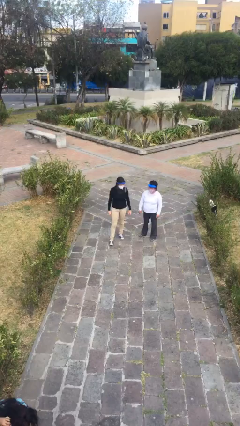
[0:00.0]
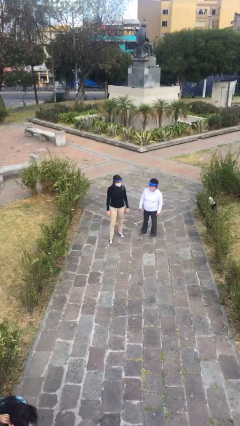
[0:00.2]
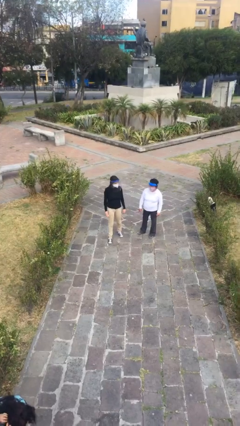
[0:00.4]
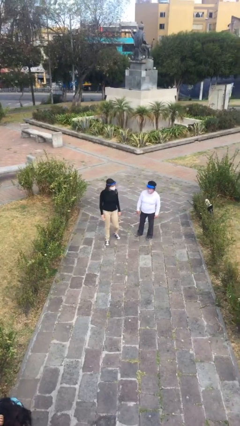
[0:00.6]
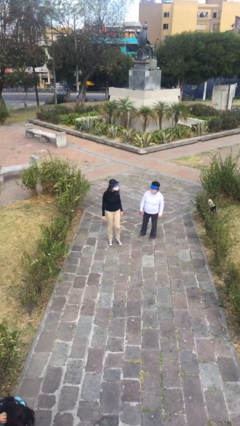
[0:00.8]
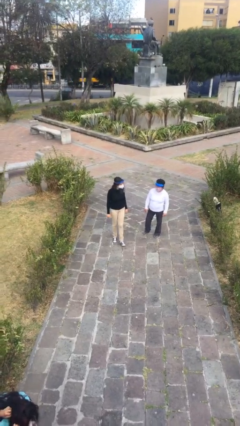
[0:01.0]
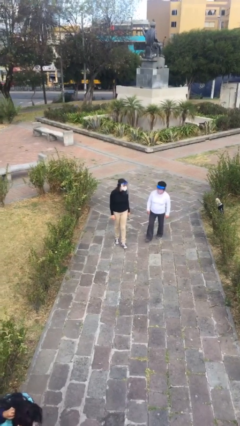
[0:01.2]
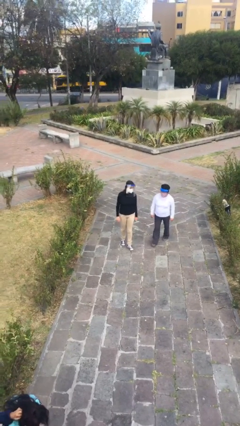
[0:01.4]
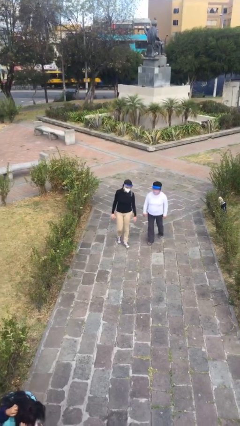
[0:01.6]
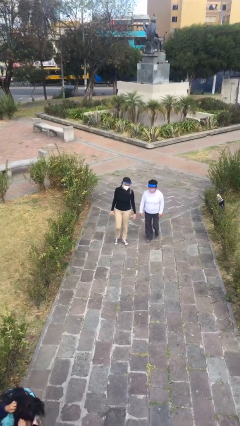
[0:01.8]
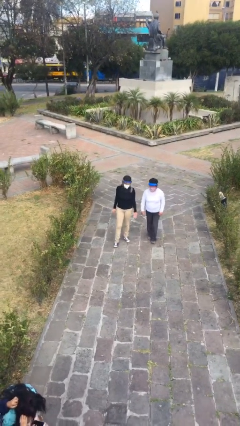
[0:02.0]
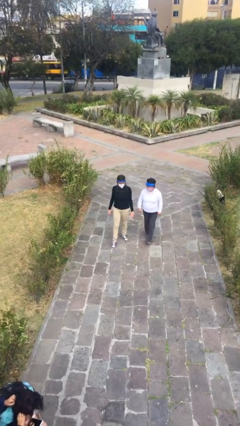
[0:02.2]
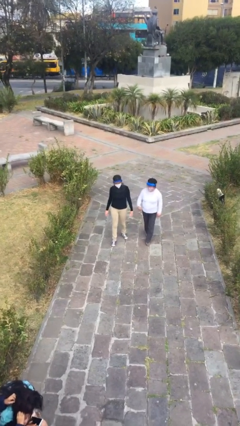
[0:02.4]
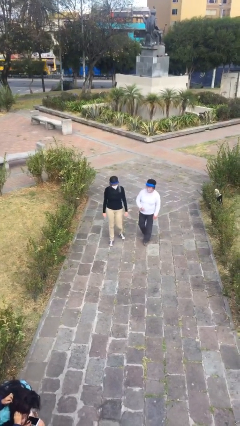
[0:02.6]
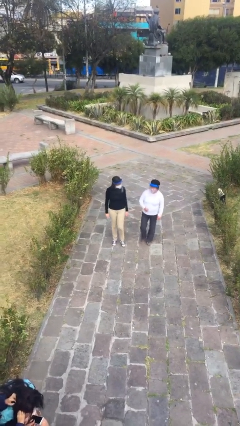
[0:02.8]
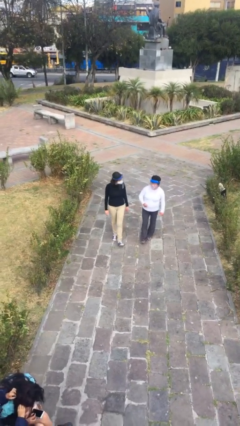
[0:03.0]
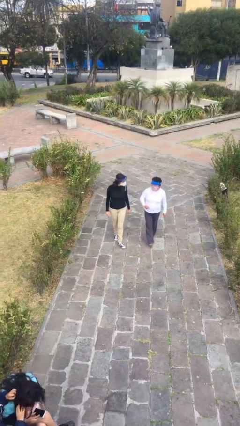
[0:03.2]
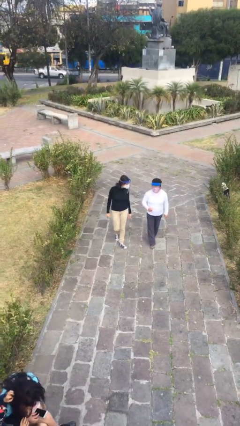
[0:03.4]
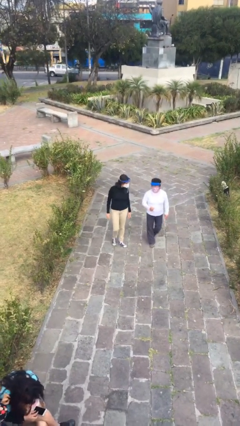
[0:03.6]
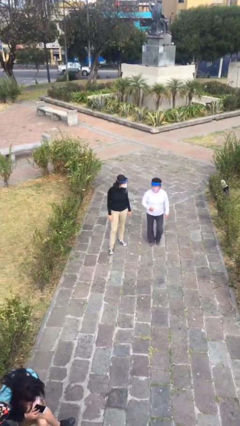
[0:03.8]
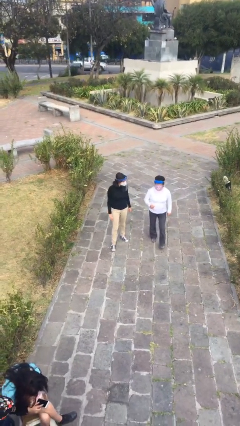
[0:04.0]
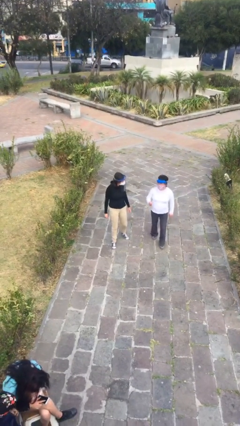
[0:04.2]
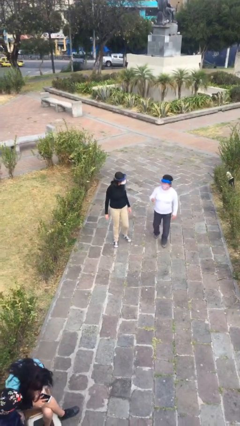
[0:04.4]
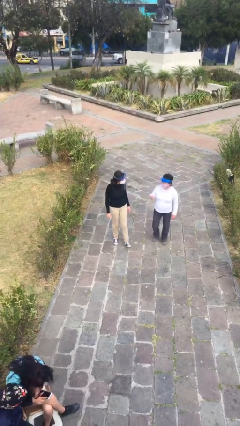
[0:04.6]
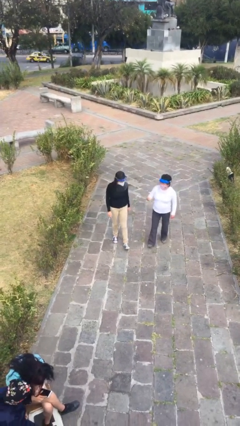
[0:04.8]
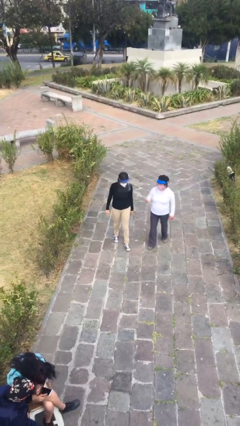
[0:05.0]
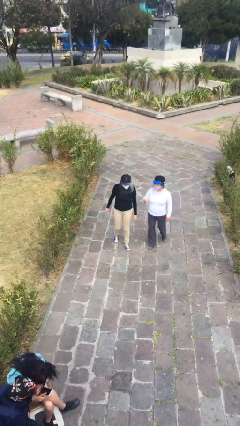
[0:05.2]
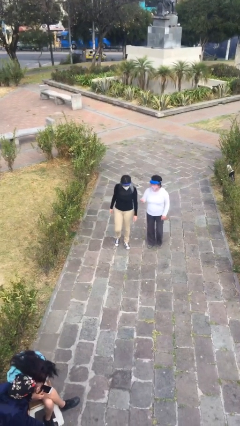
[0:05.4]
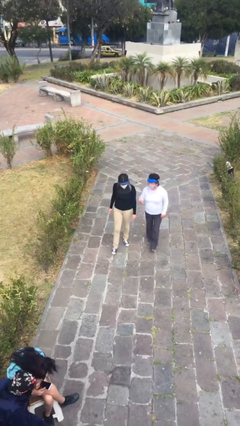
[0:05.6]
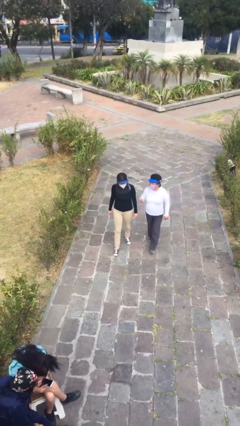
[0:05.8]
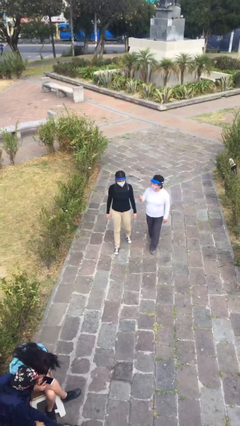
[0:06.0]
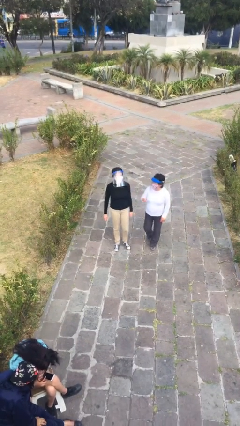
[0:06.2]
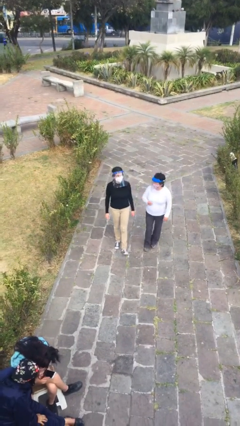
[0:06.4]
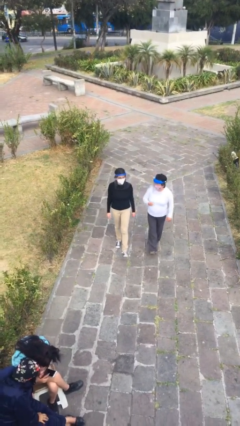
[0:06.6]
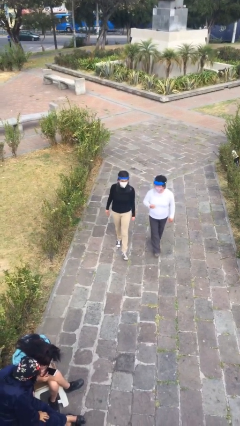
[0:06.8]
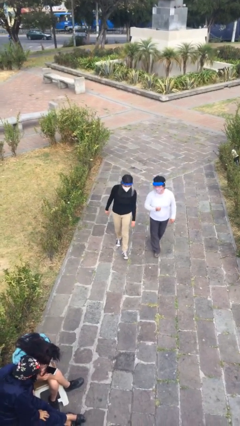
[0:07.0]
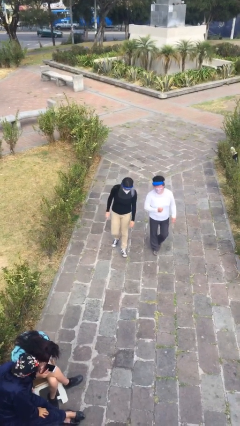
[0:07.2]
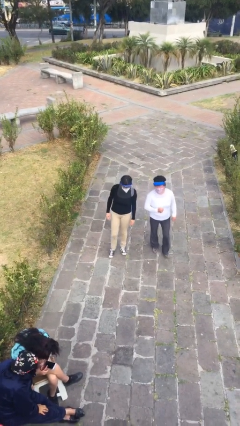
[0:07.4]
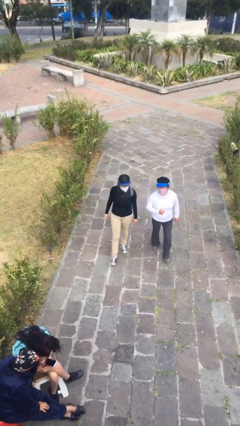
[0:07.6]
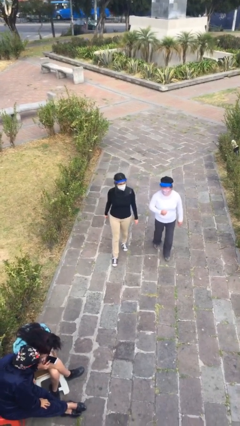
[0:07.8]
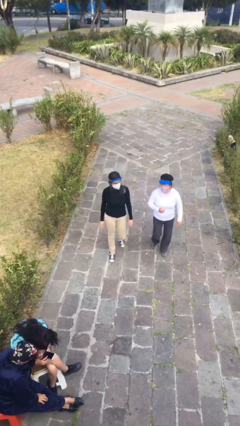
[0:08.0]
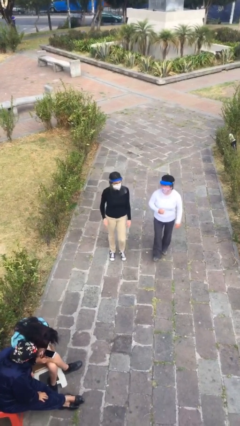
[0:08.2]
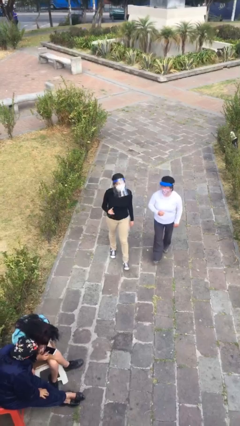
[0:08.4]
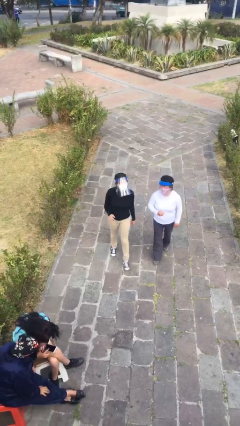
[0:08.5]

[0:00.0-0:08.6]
person talks to person

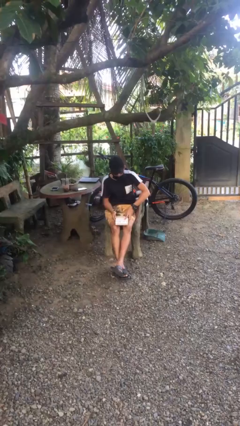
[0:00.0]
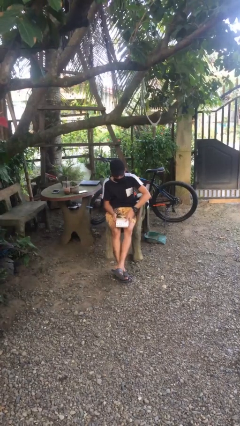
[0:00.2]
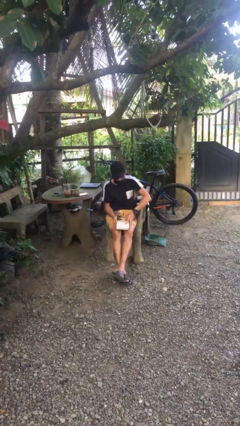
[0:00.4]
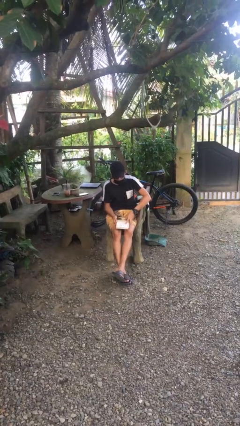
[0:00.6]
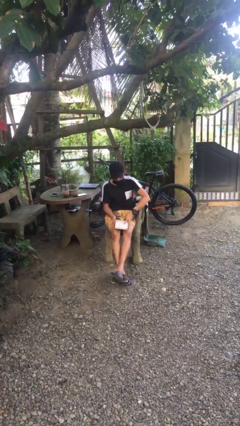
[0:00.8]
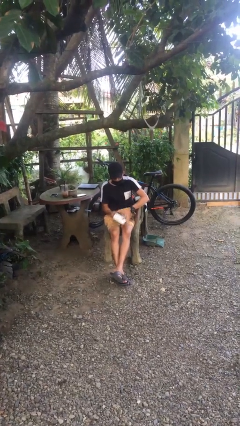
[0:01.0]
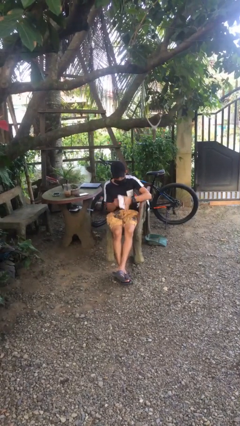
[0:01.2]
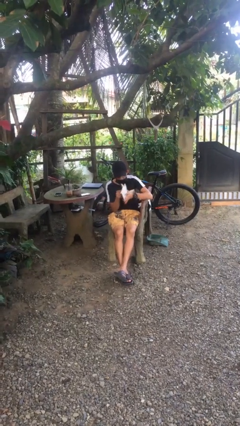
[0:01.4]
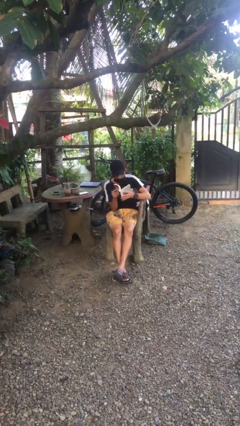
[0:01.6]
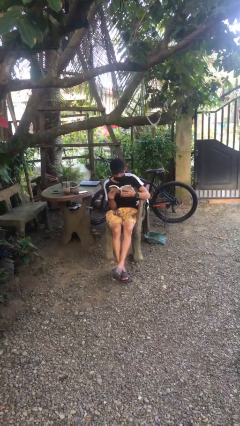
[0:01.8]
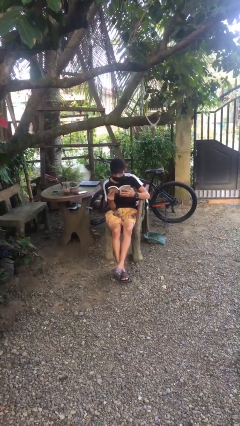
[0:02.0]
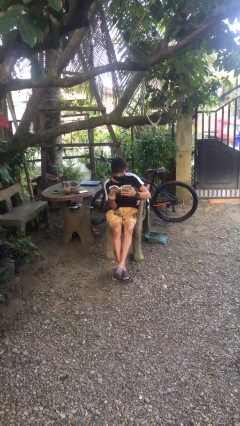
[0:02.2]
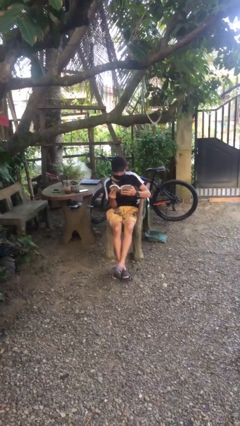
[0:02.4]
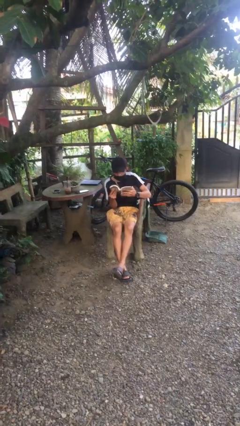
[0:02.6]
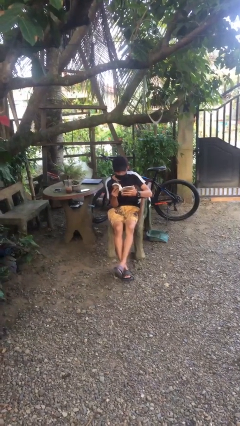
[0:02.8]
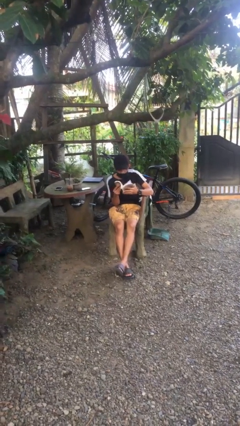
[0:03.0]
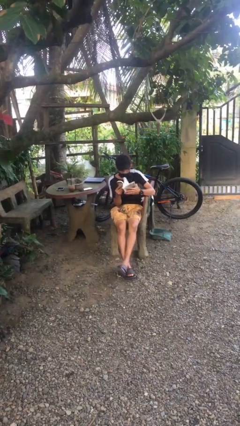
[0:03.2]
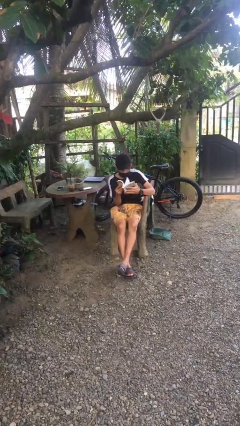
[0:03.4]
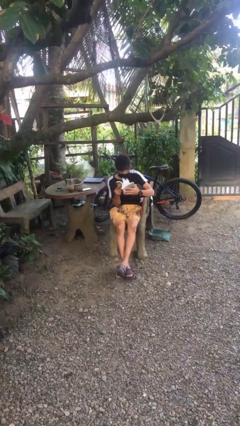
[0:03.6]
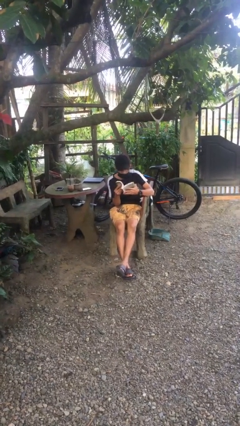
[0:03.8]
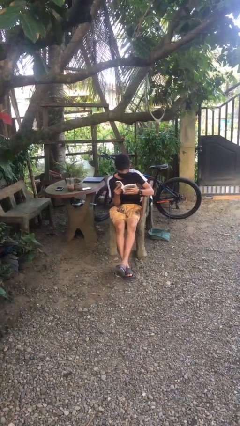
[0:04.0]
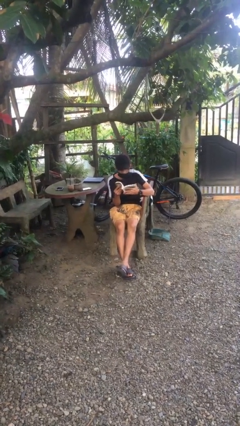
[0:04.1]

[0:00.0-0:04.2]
person reads document

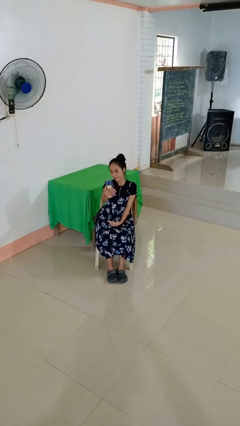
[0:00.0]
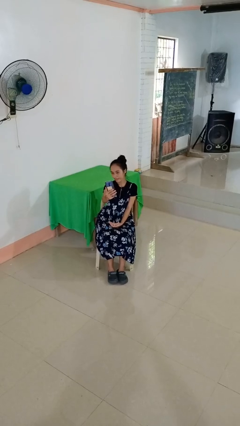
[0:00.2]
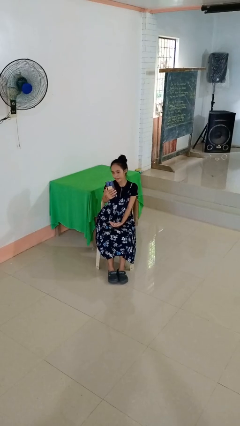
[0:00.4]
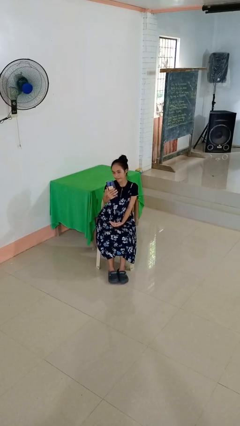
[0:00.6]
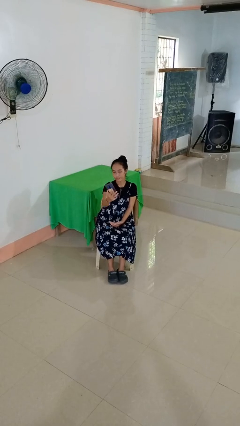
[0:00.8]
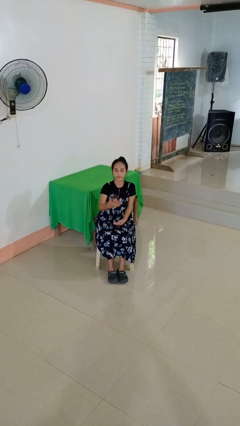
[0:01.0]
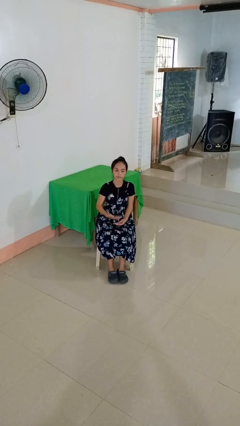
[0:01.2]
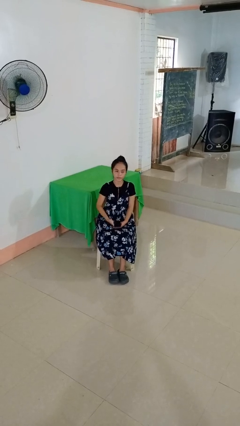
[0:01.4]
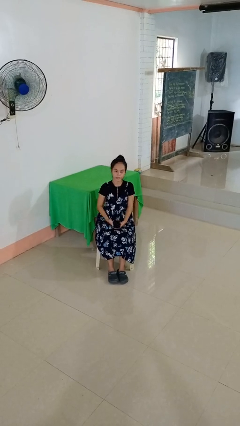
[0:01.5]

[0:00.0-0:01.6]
person takes selfie

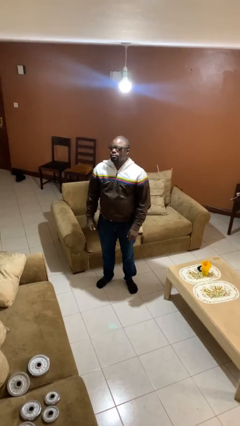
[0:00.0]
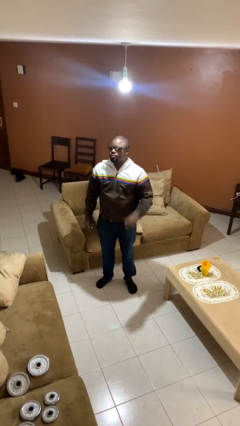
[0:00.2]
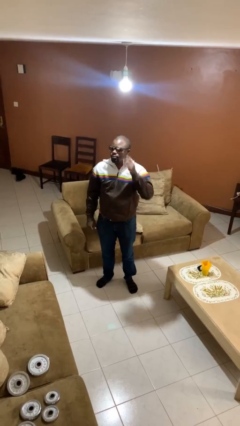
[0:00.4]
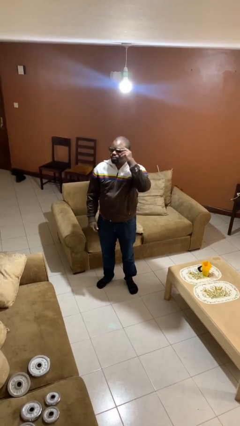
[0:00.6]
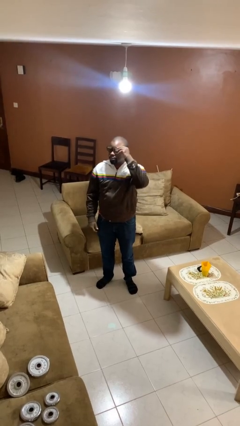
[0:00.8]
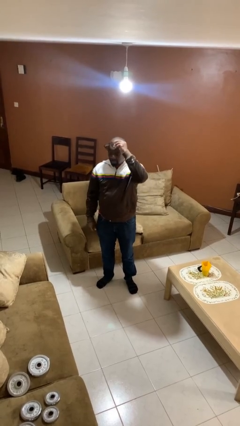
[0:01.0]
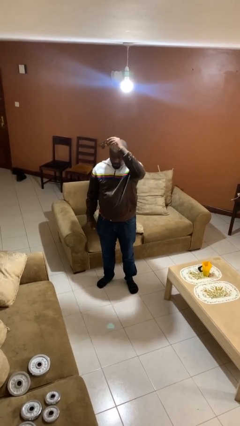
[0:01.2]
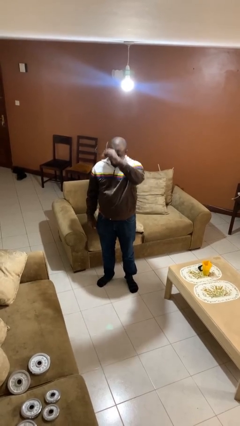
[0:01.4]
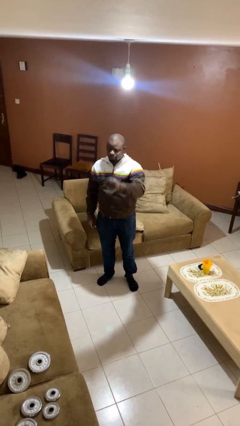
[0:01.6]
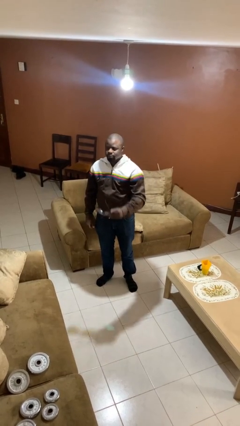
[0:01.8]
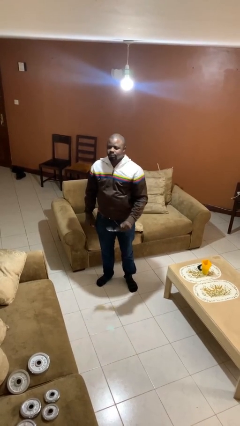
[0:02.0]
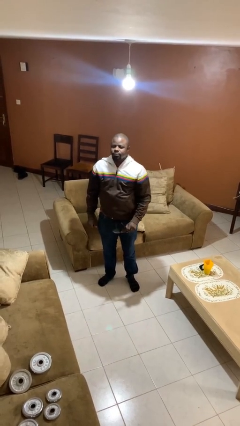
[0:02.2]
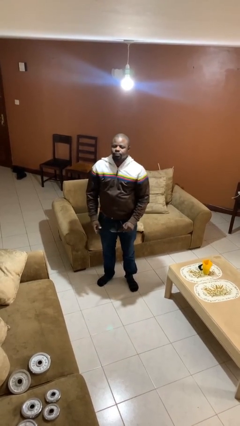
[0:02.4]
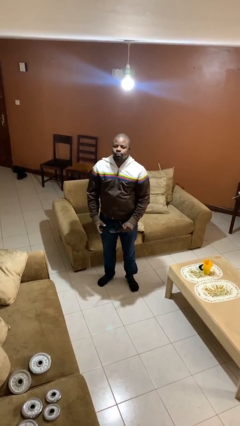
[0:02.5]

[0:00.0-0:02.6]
person takes off sunglasses

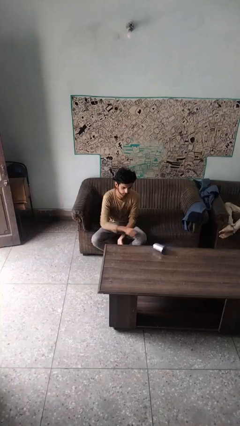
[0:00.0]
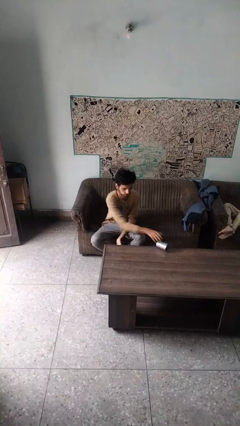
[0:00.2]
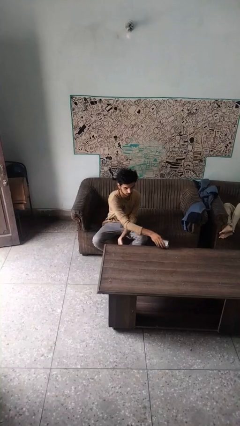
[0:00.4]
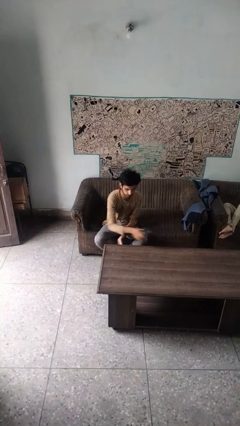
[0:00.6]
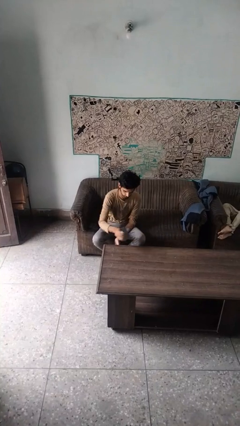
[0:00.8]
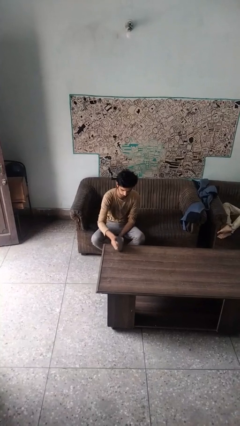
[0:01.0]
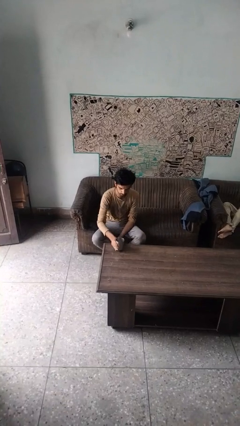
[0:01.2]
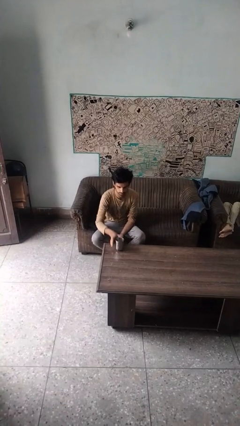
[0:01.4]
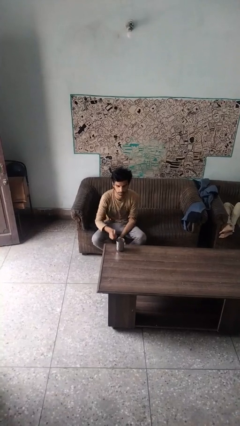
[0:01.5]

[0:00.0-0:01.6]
person sets upright glass
